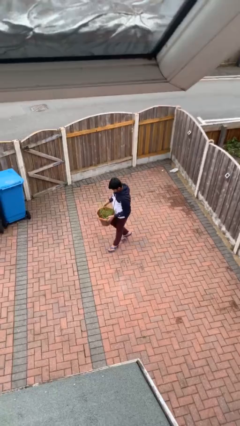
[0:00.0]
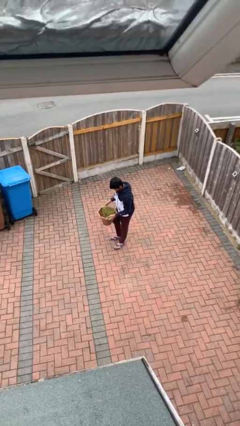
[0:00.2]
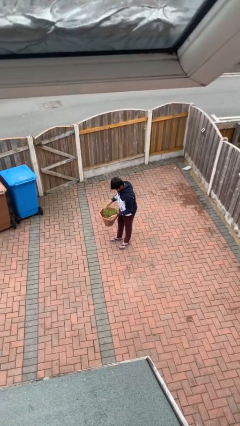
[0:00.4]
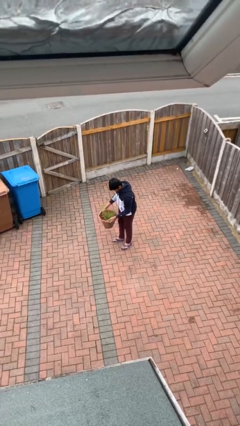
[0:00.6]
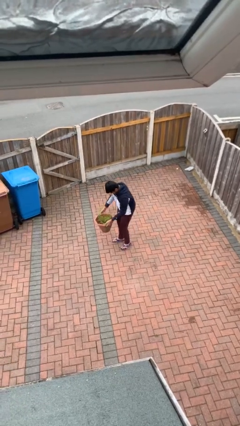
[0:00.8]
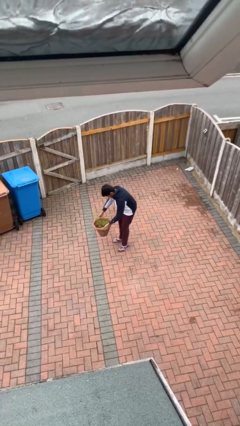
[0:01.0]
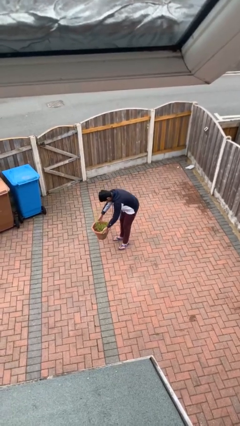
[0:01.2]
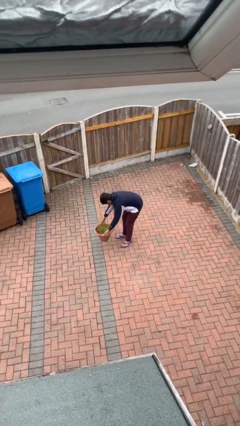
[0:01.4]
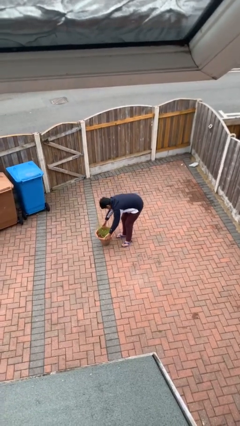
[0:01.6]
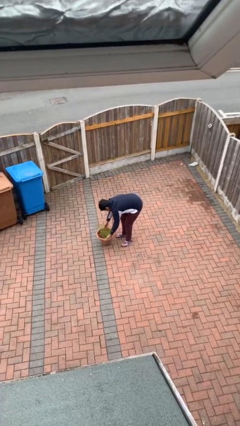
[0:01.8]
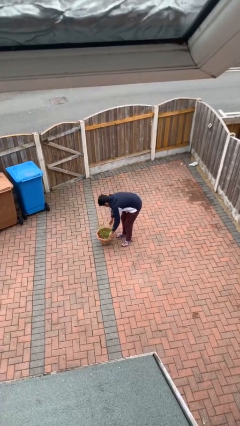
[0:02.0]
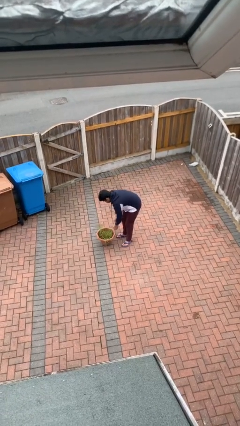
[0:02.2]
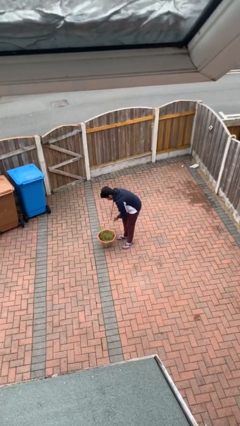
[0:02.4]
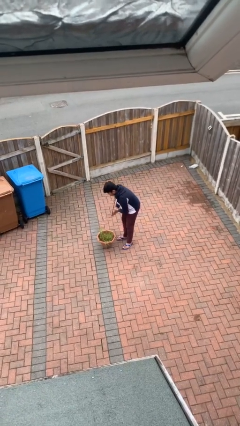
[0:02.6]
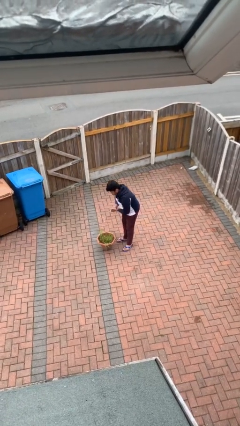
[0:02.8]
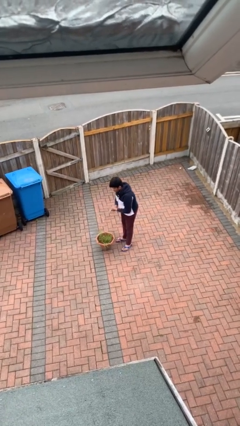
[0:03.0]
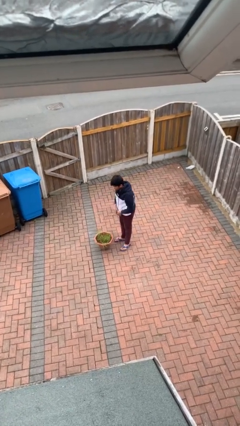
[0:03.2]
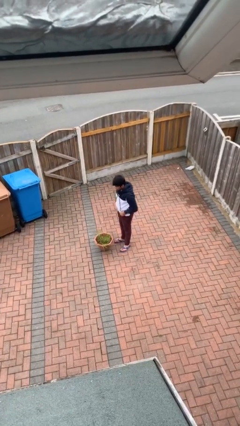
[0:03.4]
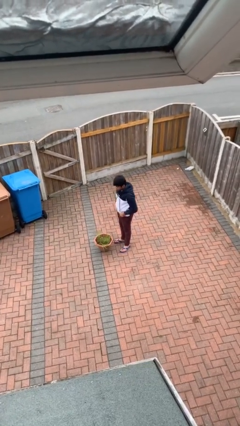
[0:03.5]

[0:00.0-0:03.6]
person puts down object on floor

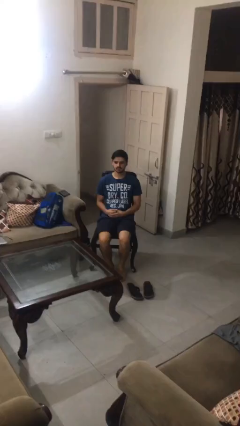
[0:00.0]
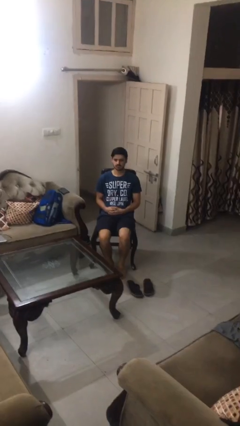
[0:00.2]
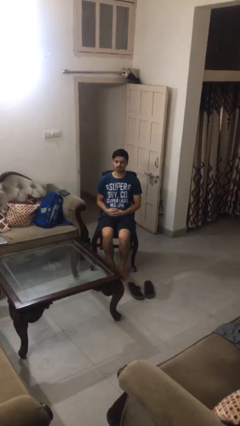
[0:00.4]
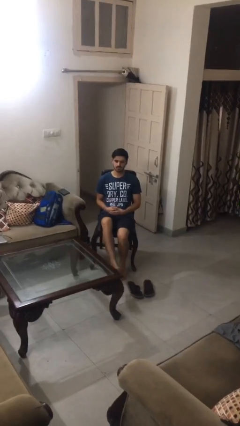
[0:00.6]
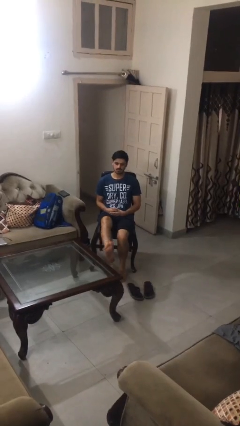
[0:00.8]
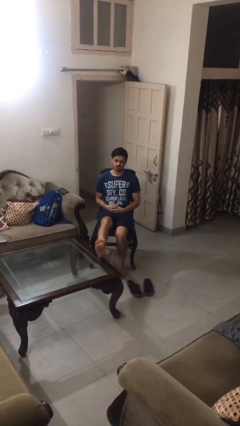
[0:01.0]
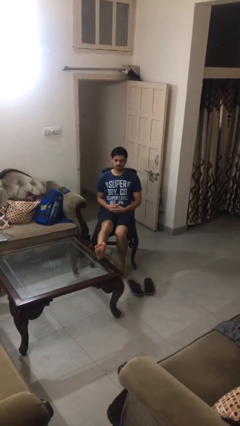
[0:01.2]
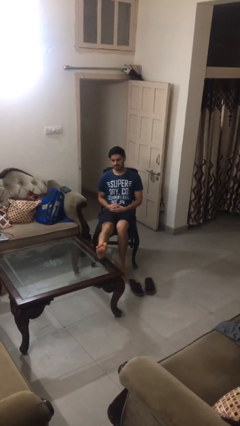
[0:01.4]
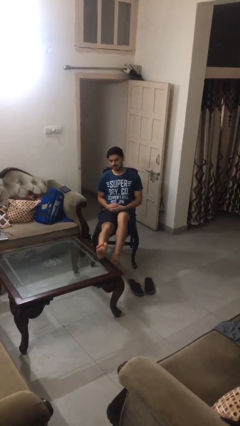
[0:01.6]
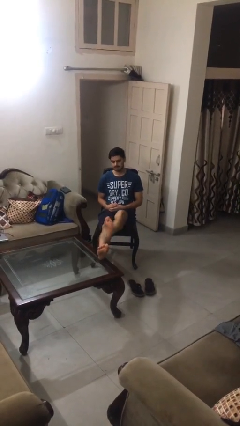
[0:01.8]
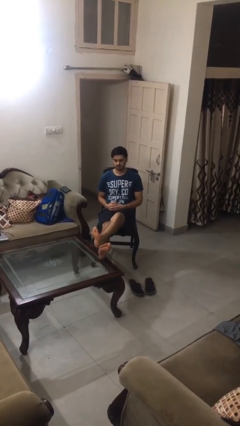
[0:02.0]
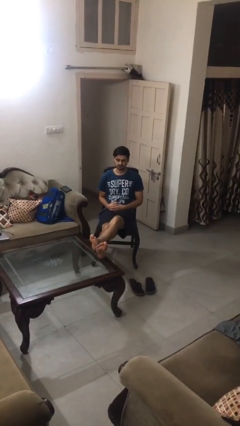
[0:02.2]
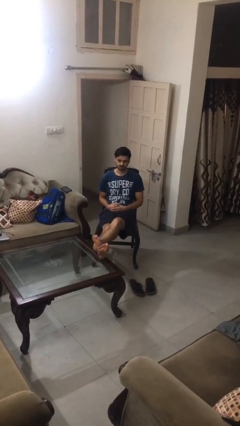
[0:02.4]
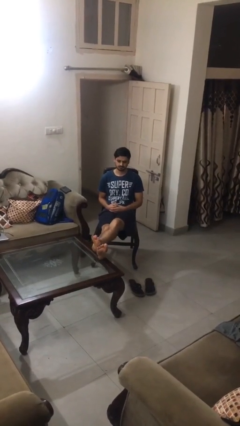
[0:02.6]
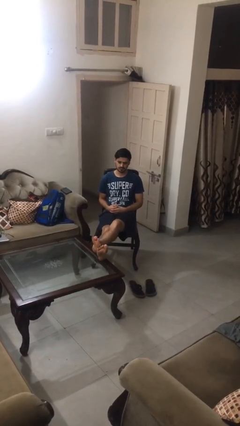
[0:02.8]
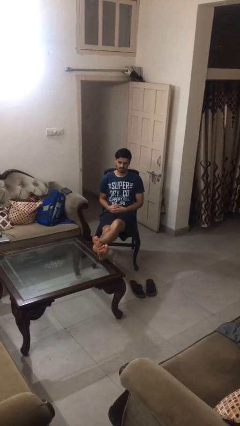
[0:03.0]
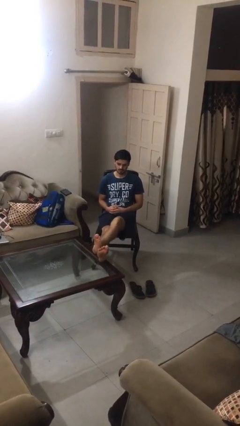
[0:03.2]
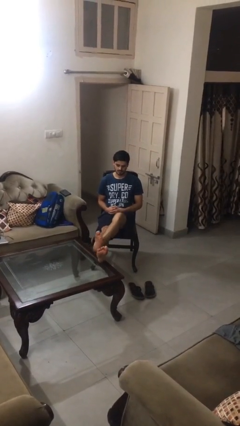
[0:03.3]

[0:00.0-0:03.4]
person puts feet up

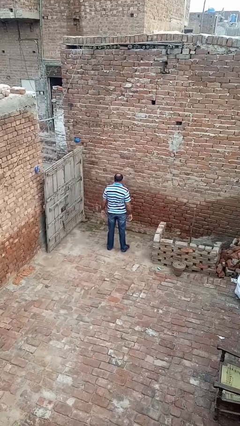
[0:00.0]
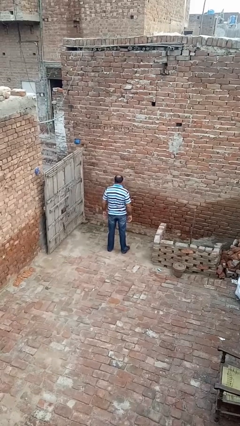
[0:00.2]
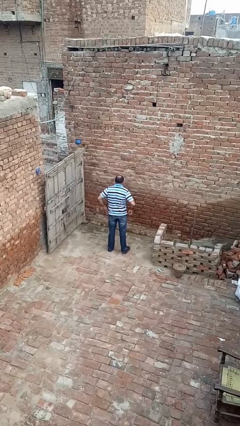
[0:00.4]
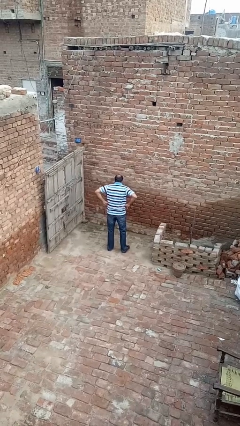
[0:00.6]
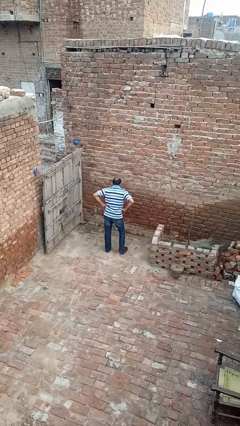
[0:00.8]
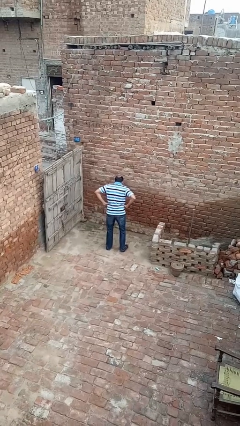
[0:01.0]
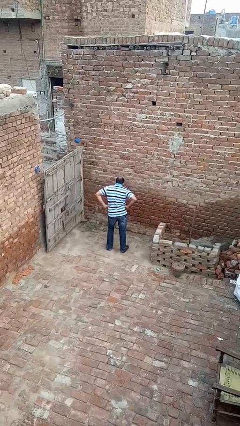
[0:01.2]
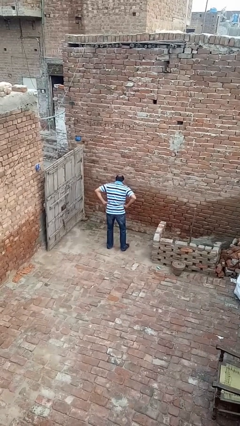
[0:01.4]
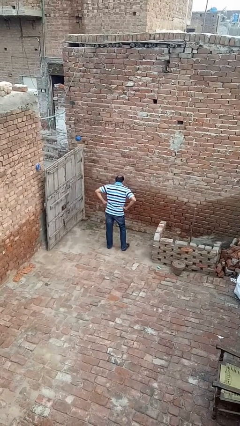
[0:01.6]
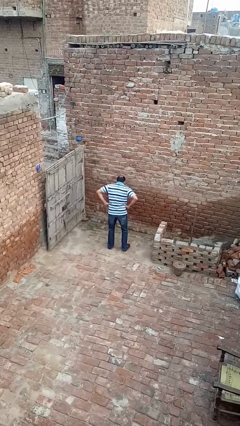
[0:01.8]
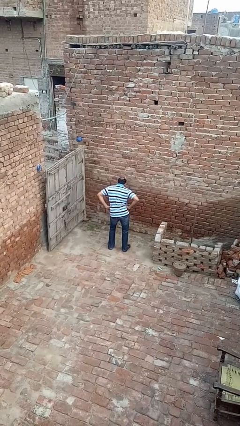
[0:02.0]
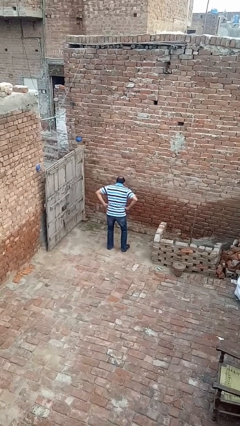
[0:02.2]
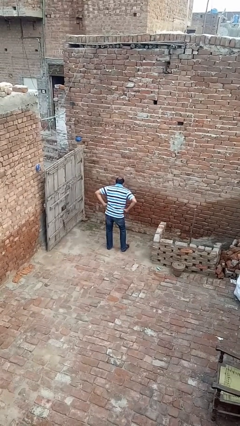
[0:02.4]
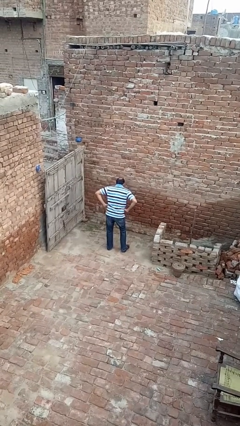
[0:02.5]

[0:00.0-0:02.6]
person wiggles hips

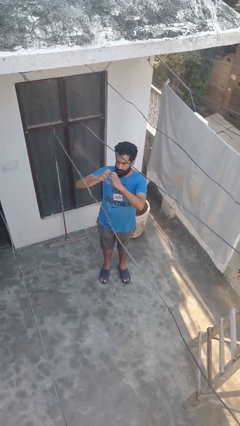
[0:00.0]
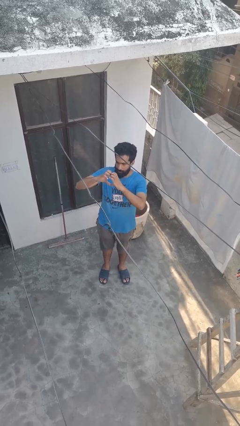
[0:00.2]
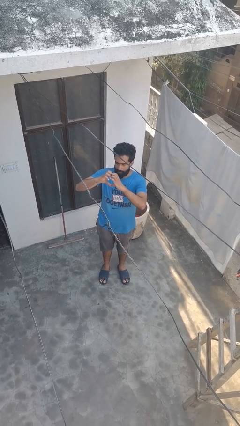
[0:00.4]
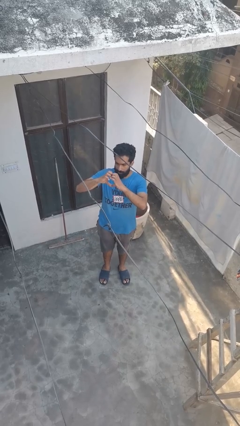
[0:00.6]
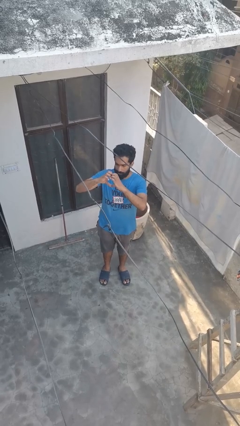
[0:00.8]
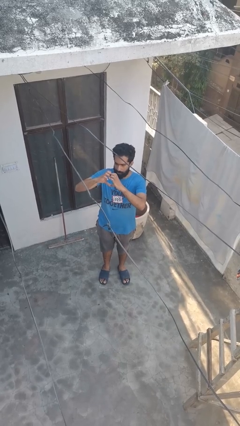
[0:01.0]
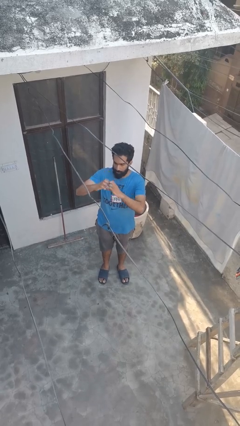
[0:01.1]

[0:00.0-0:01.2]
person gestures heart

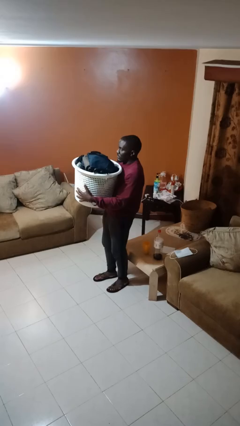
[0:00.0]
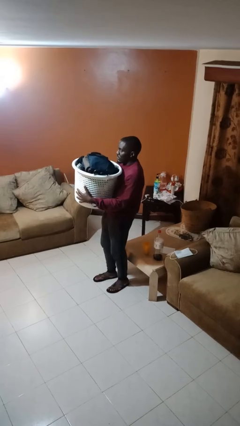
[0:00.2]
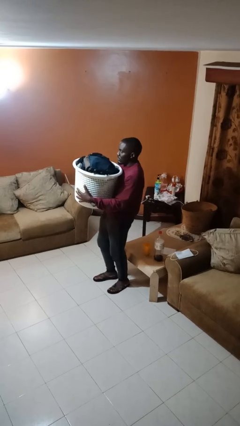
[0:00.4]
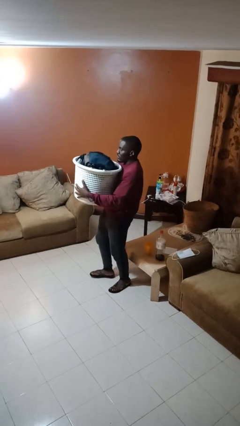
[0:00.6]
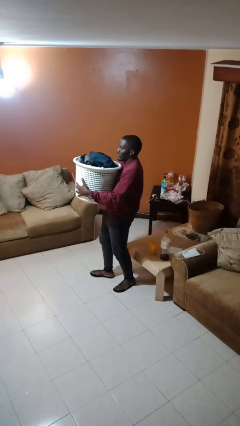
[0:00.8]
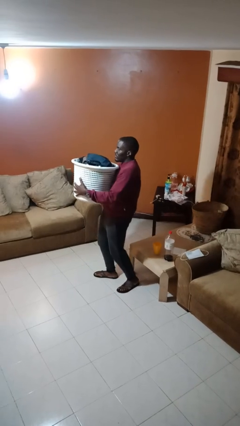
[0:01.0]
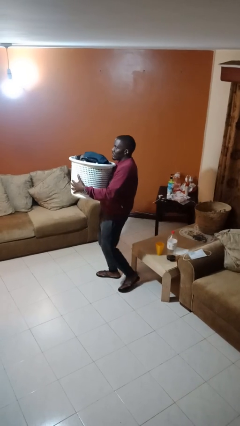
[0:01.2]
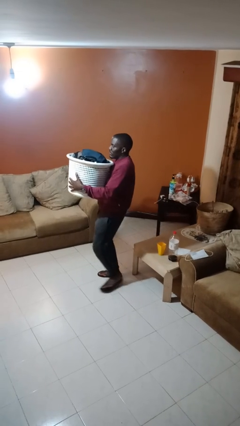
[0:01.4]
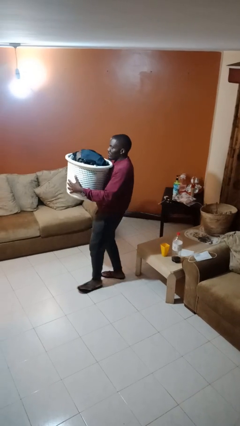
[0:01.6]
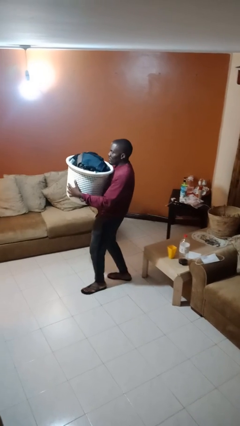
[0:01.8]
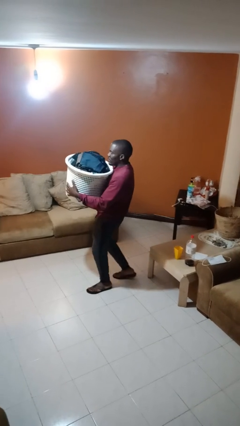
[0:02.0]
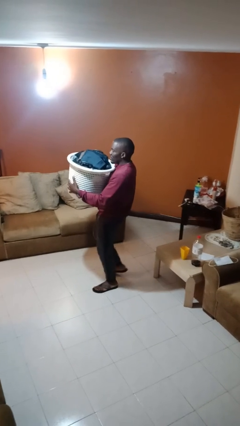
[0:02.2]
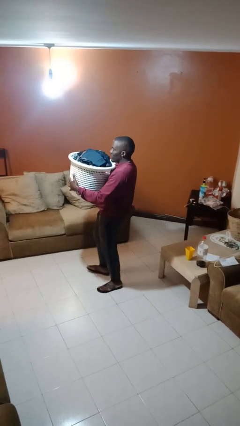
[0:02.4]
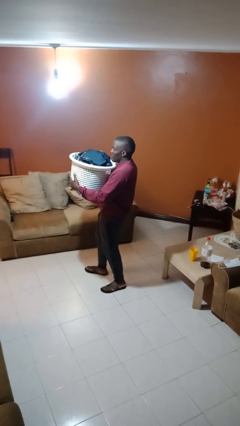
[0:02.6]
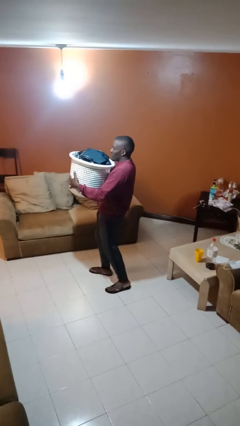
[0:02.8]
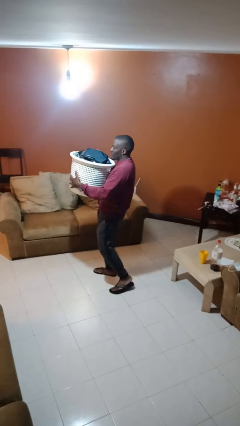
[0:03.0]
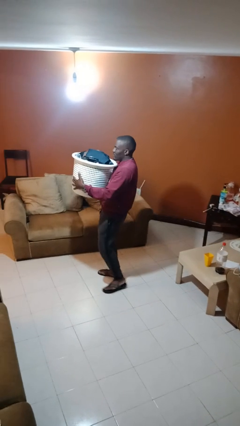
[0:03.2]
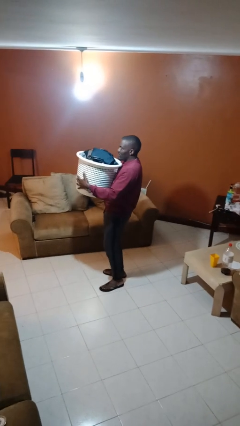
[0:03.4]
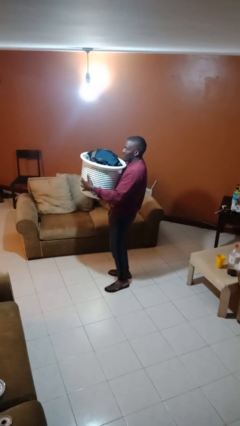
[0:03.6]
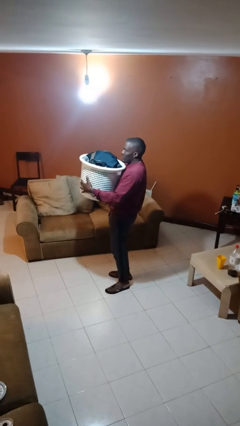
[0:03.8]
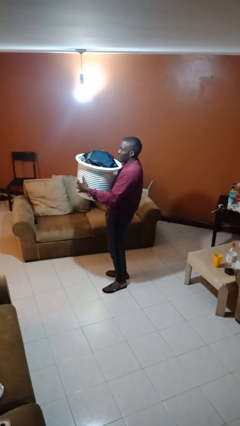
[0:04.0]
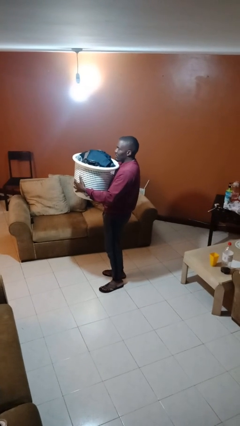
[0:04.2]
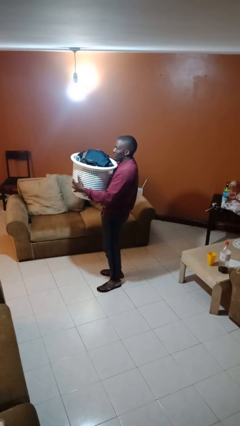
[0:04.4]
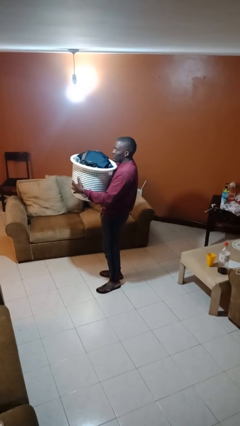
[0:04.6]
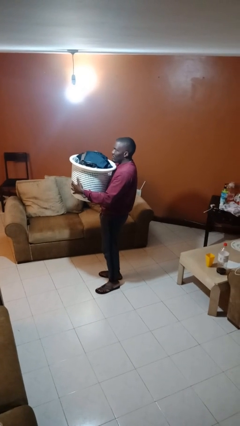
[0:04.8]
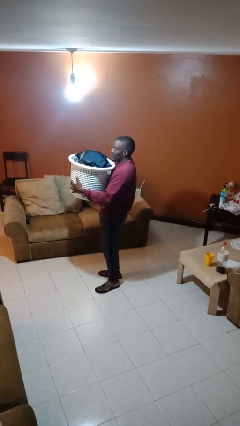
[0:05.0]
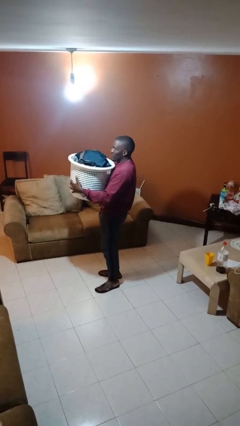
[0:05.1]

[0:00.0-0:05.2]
person carries laundry basket

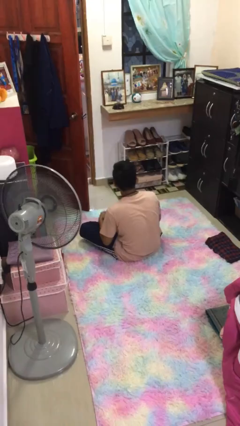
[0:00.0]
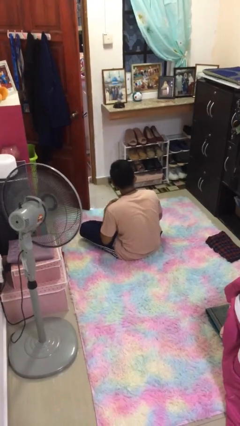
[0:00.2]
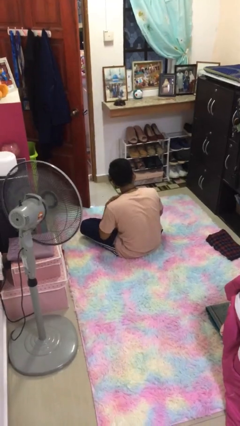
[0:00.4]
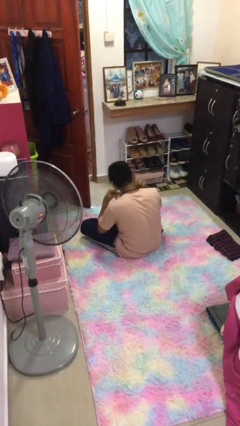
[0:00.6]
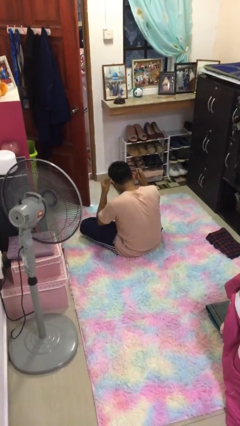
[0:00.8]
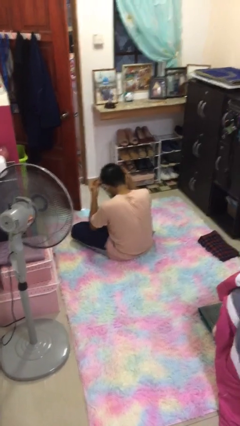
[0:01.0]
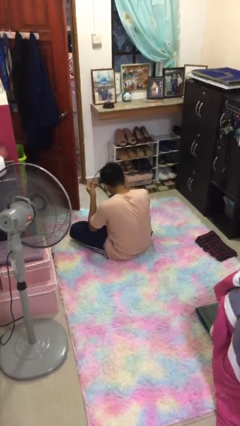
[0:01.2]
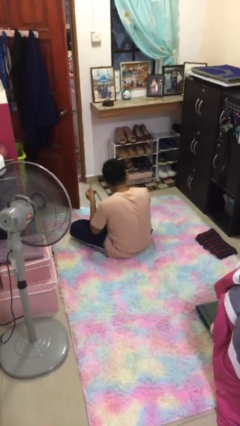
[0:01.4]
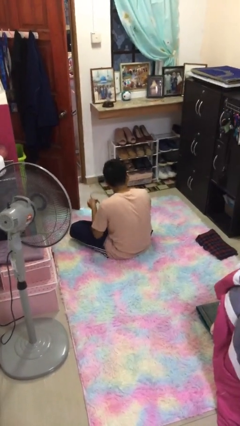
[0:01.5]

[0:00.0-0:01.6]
person takes off necklace

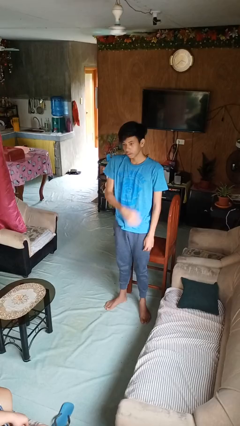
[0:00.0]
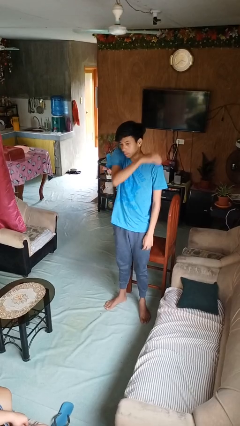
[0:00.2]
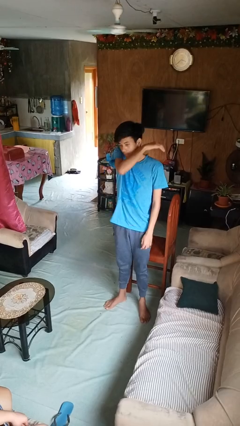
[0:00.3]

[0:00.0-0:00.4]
person sneezes into arm
